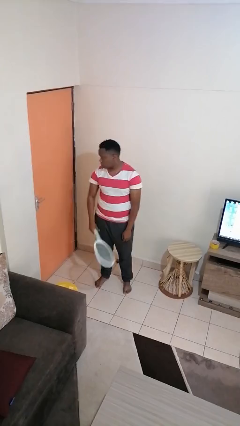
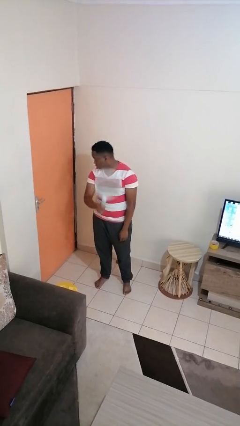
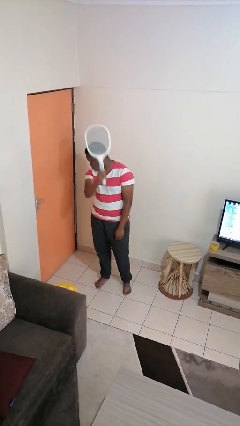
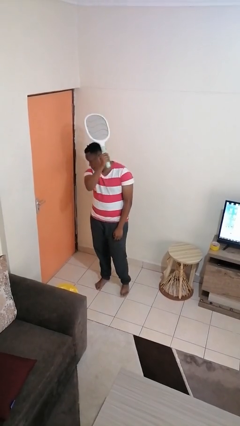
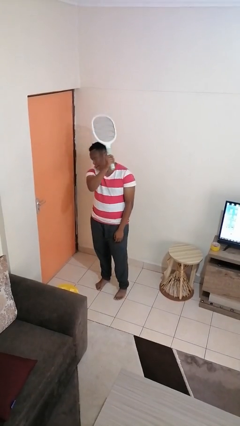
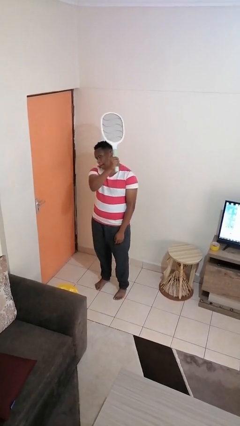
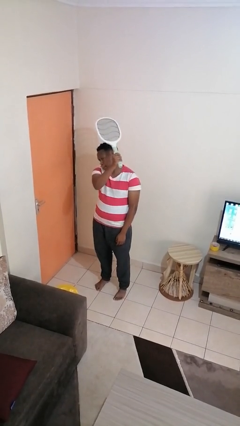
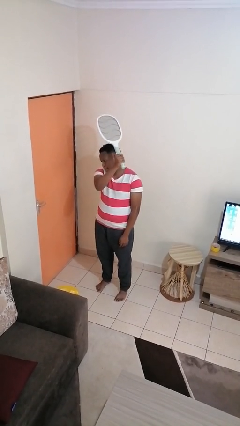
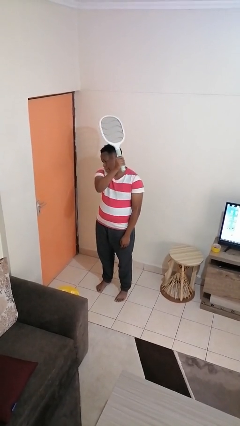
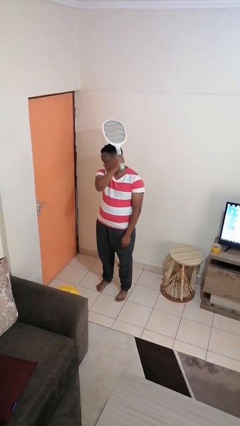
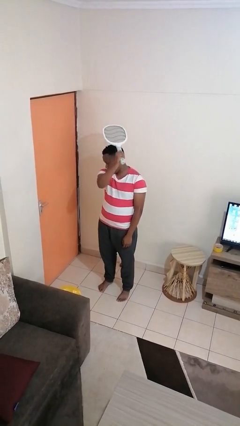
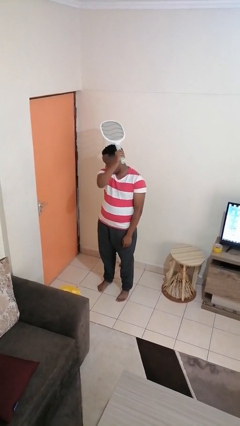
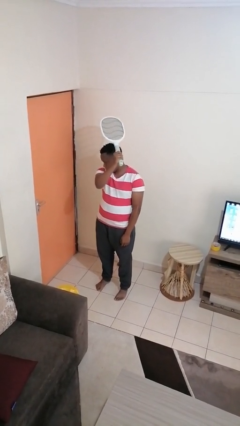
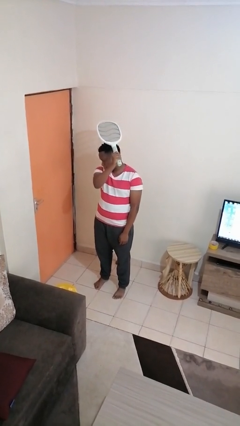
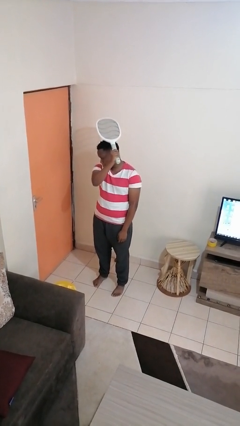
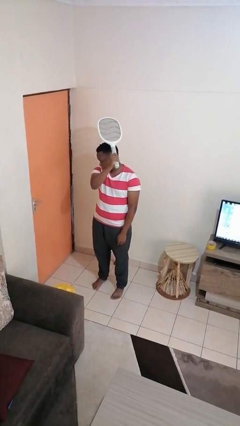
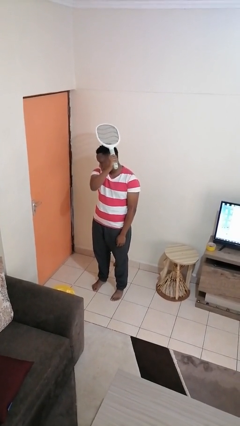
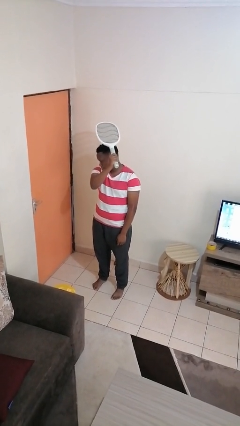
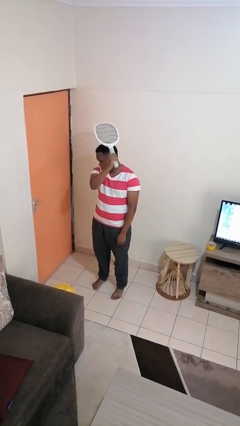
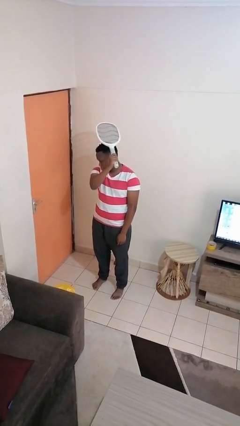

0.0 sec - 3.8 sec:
person holds object above head

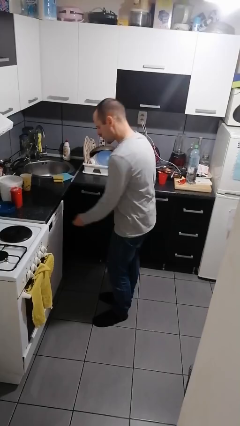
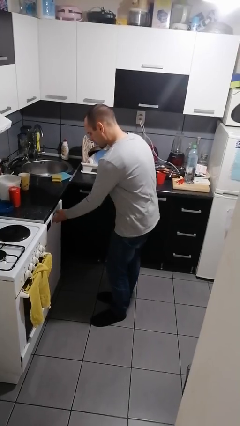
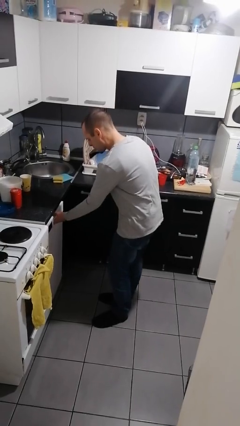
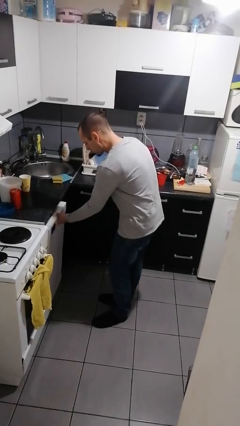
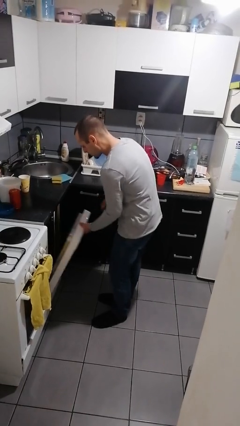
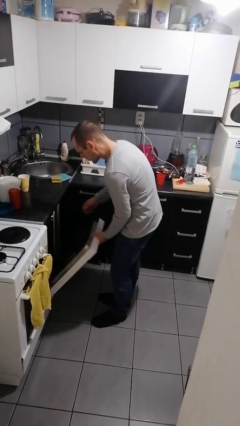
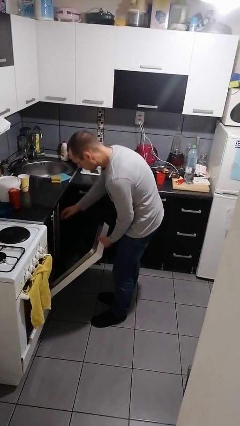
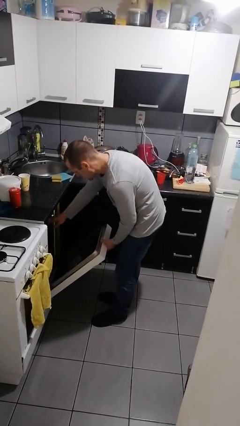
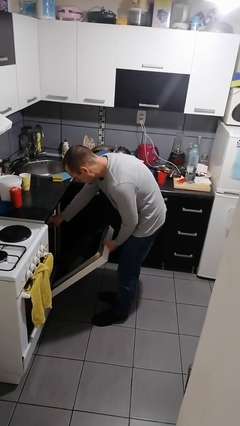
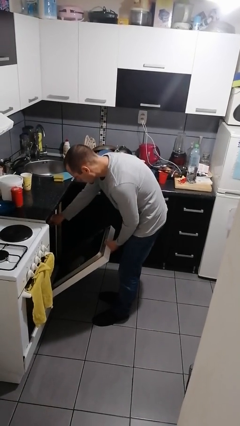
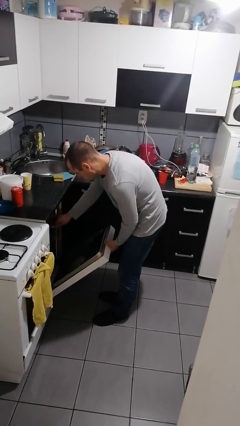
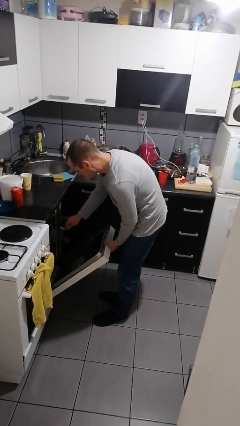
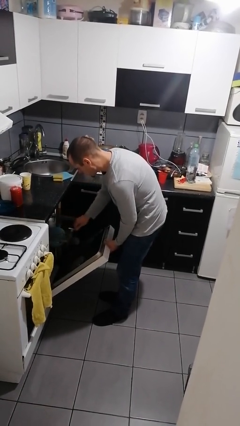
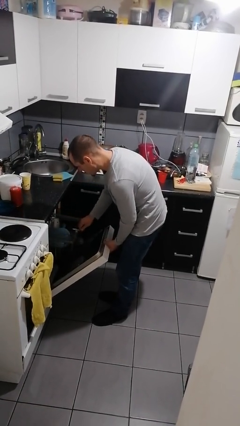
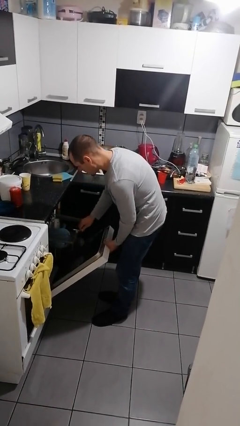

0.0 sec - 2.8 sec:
person opens dishwasher

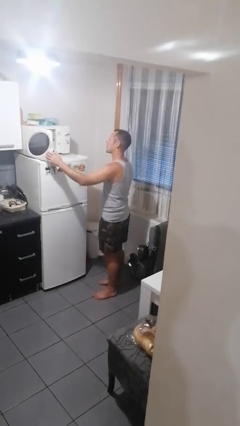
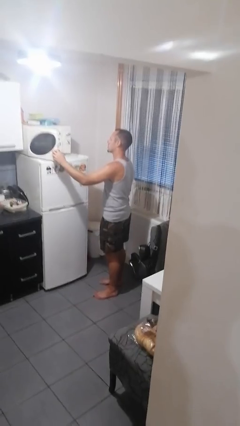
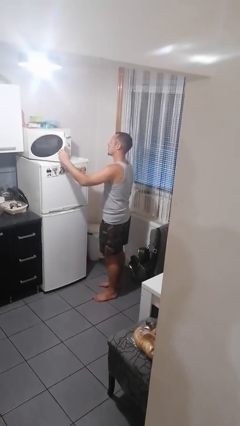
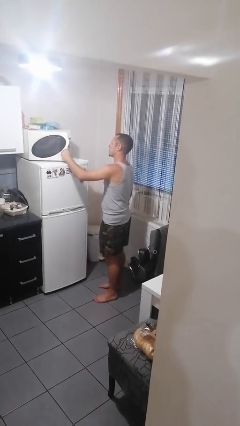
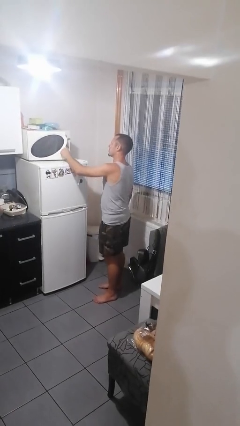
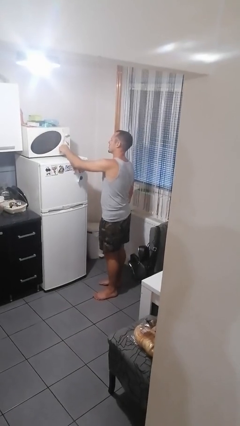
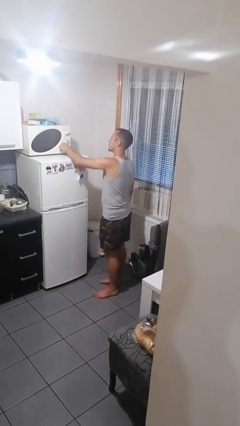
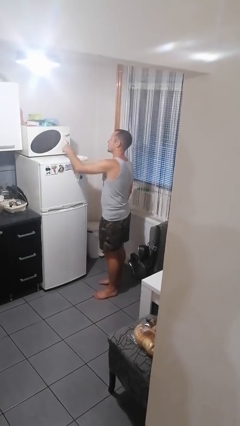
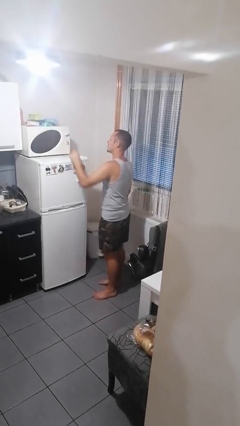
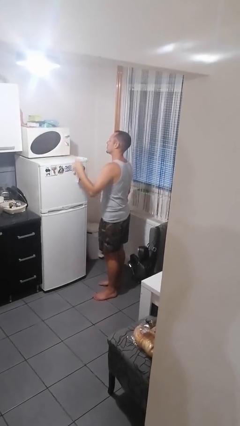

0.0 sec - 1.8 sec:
person closes microwave

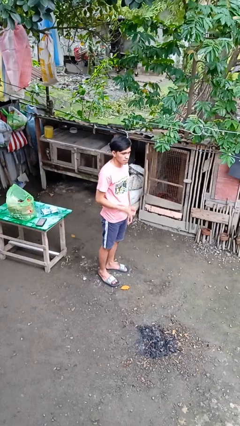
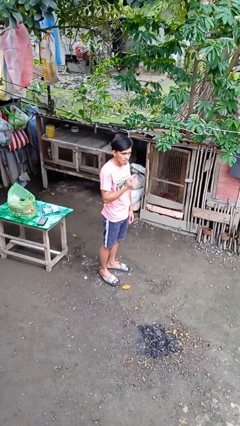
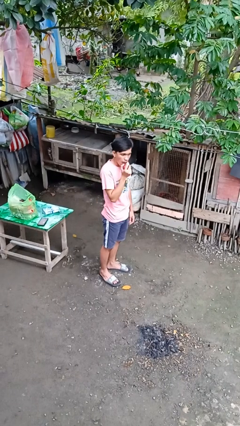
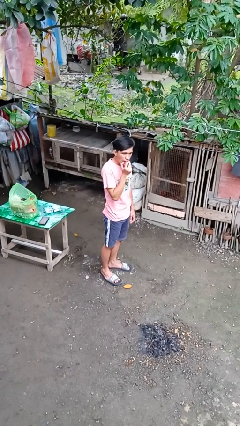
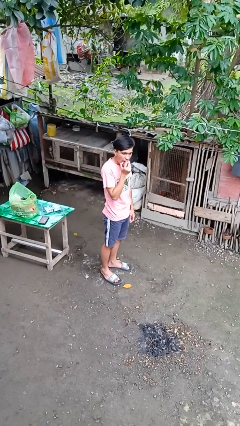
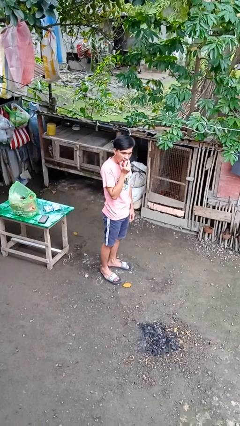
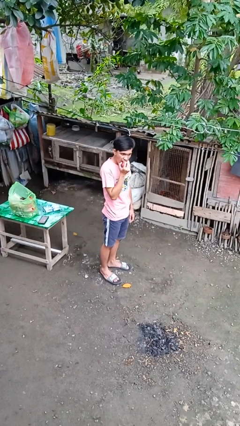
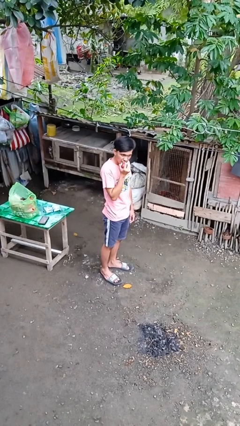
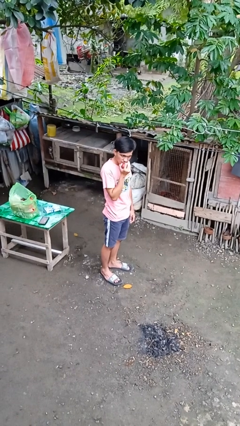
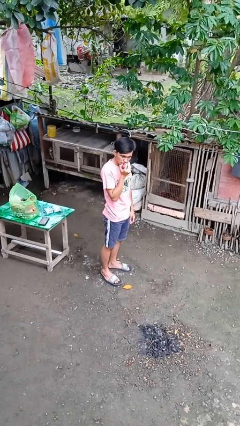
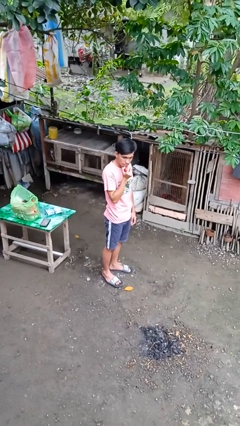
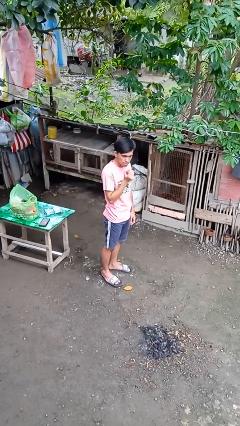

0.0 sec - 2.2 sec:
person eats apple

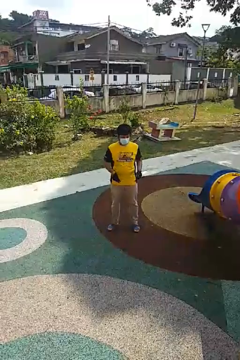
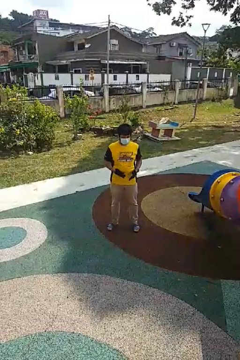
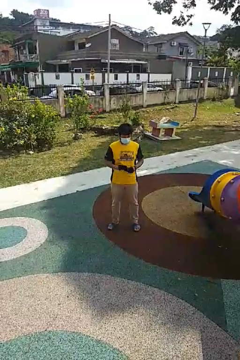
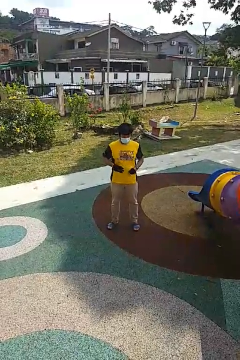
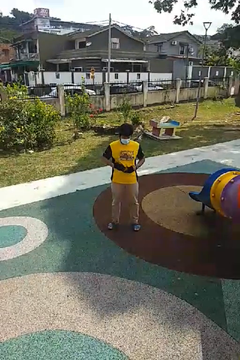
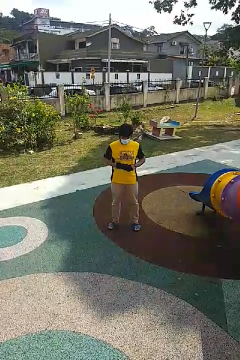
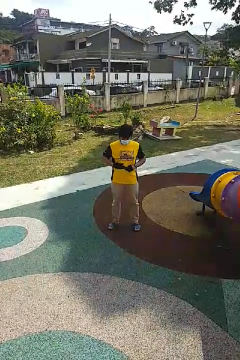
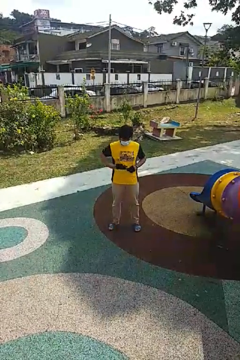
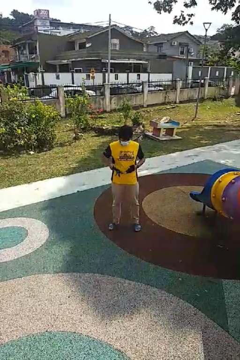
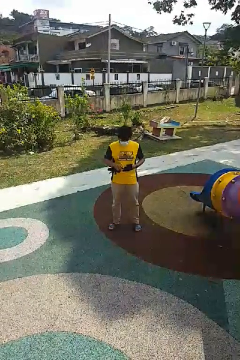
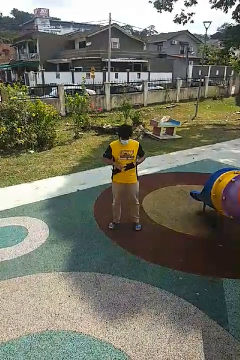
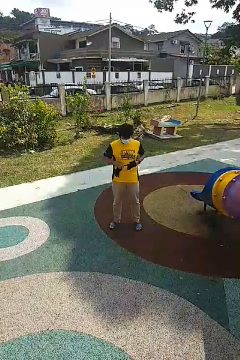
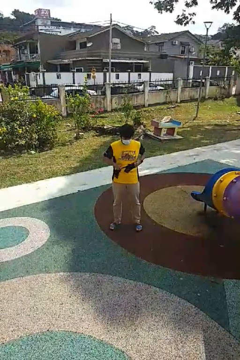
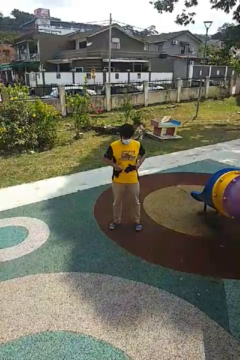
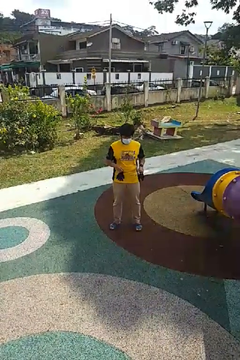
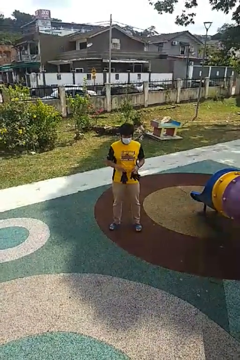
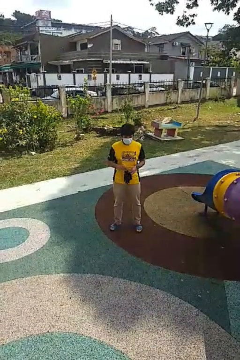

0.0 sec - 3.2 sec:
person takes off gloves

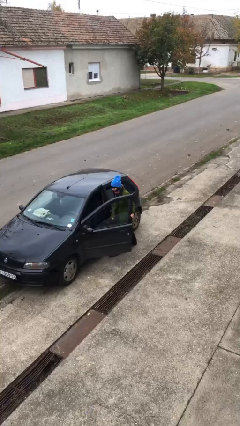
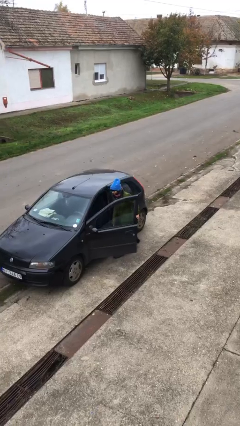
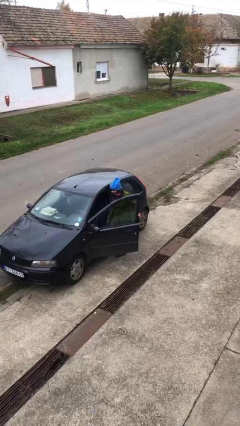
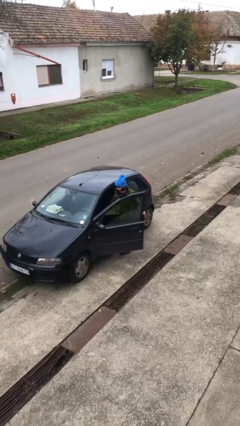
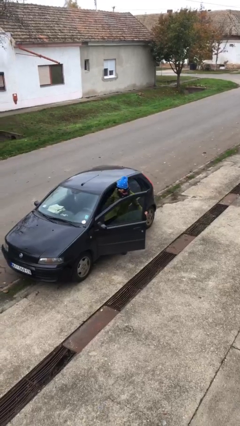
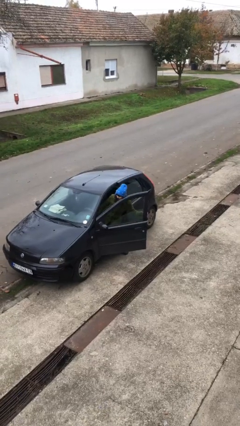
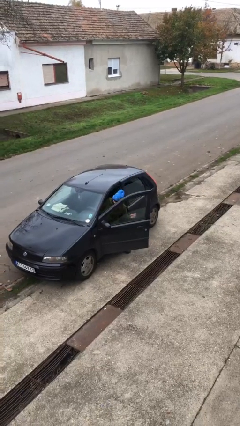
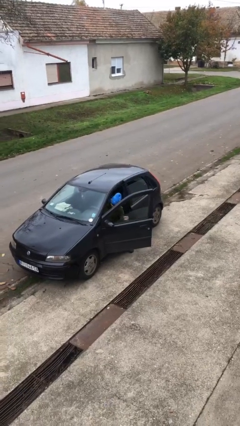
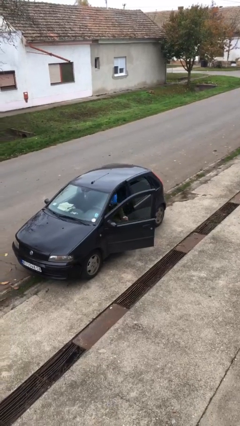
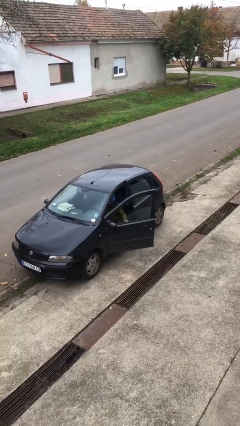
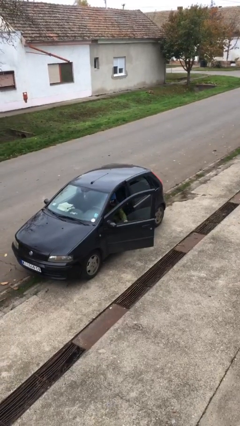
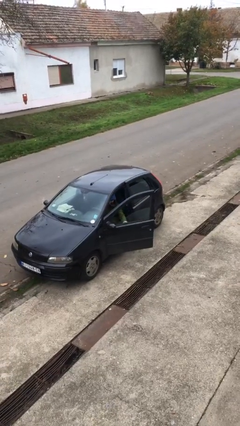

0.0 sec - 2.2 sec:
person enters car

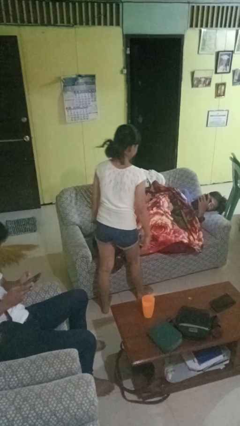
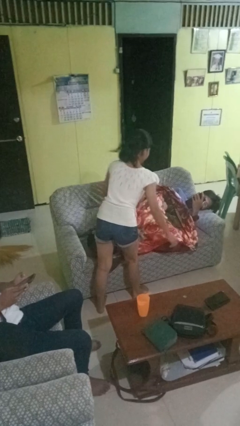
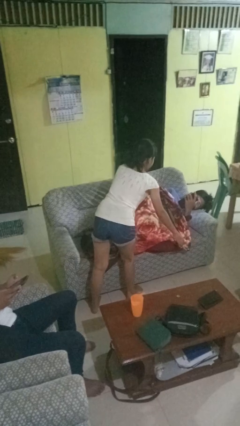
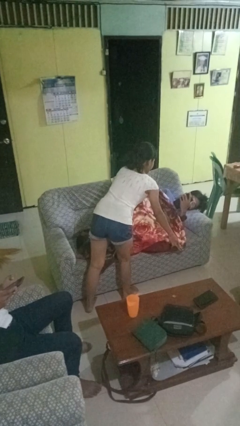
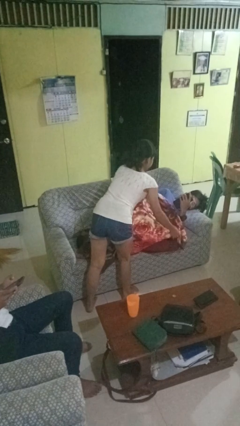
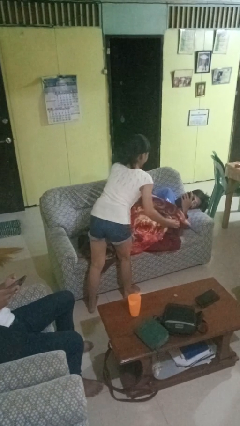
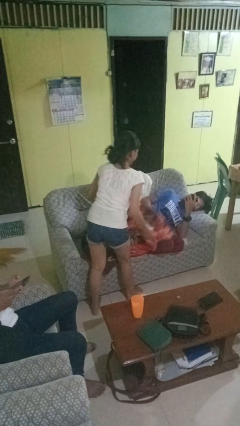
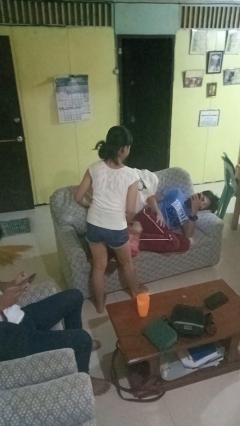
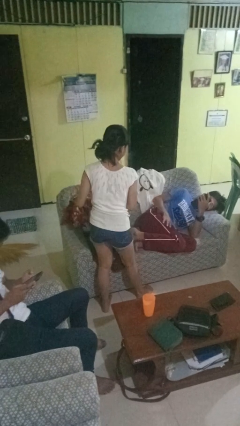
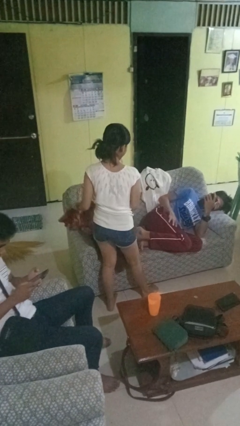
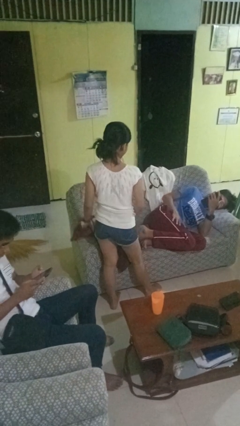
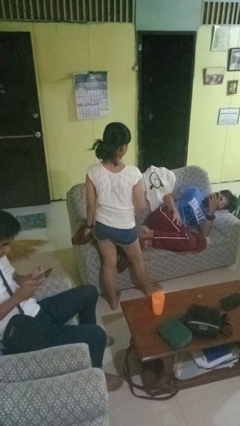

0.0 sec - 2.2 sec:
person uncovers friend with blanket
